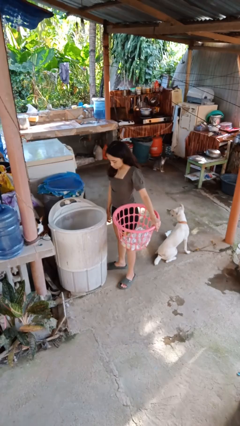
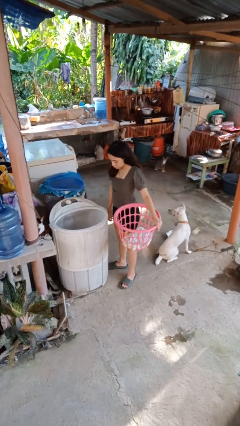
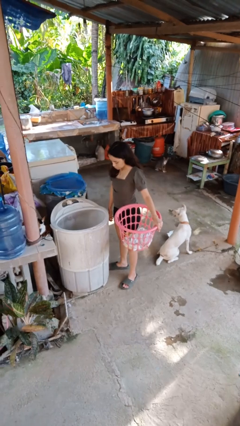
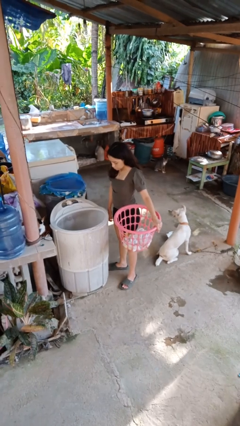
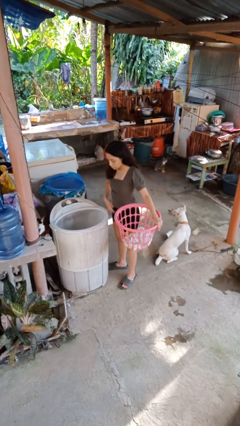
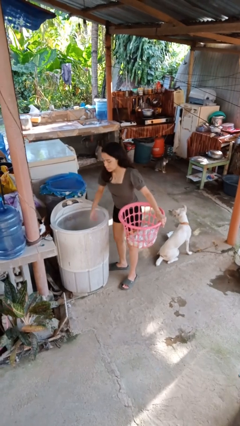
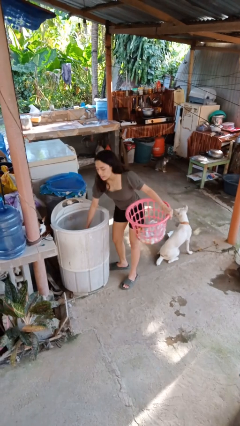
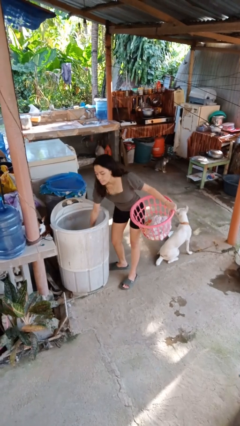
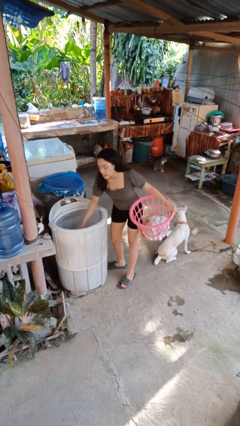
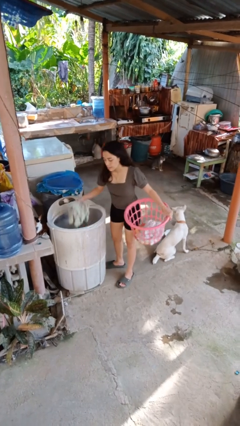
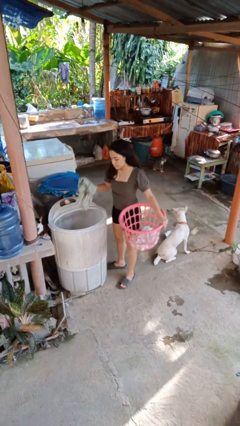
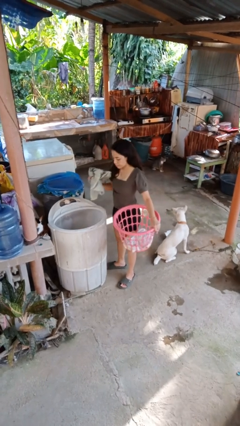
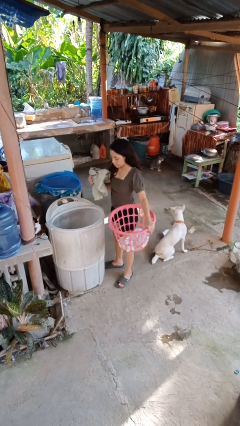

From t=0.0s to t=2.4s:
person unloads dryer

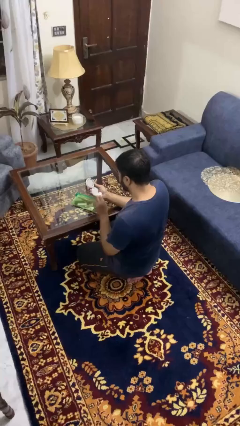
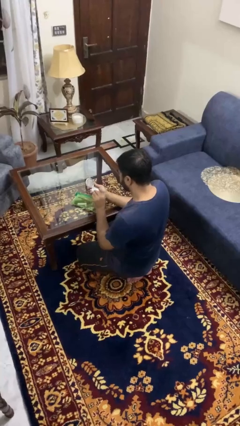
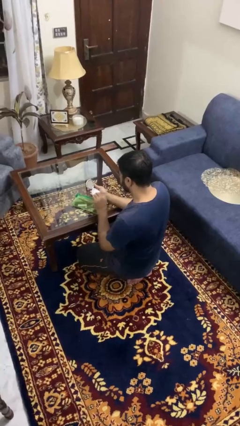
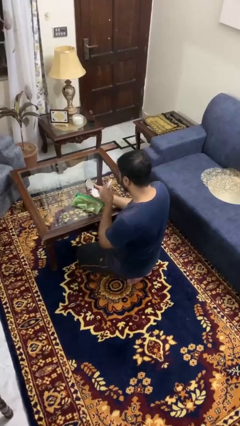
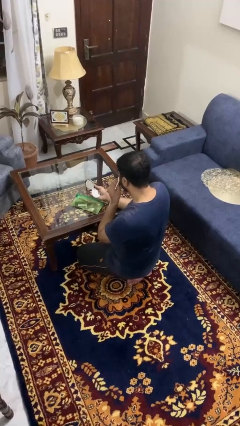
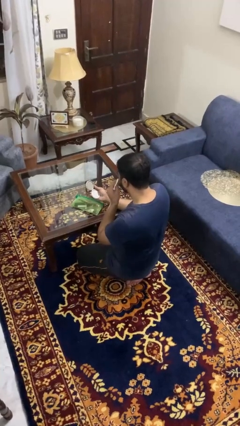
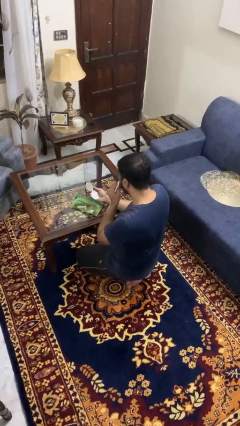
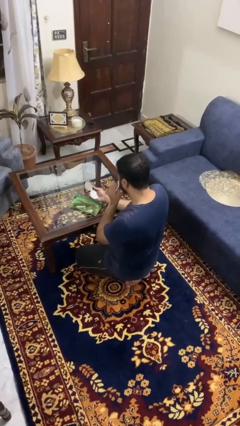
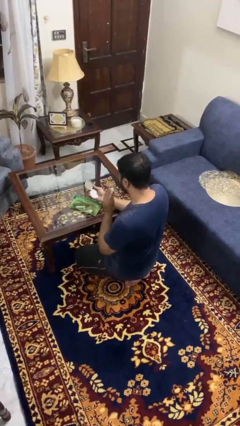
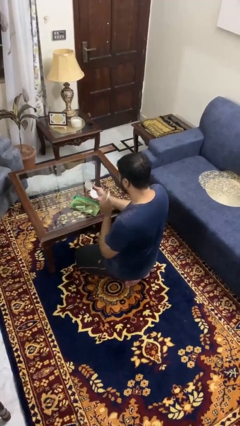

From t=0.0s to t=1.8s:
person applies foundation makeup

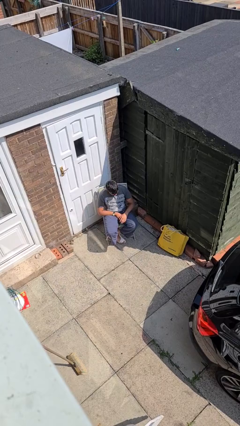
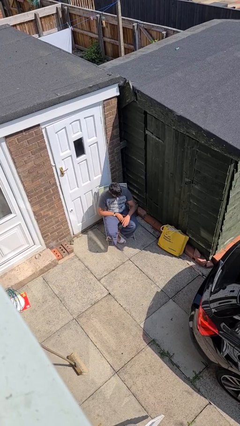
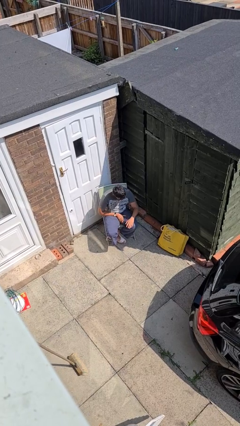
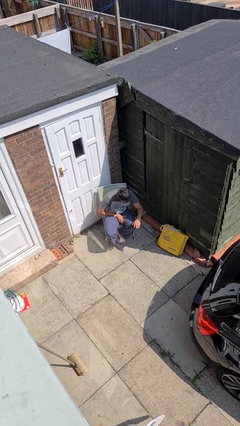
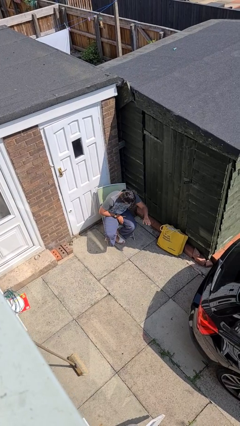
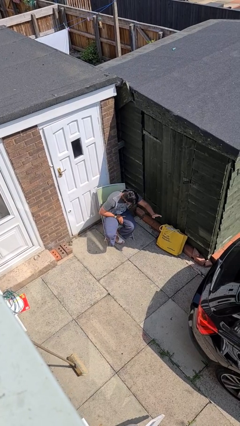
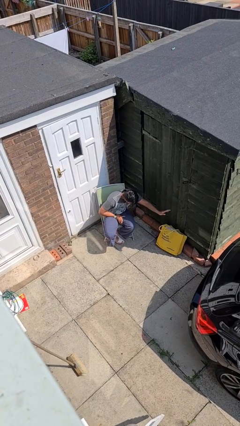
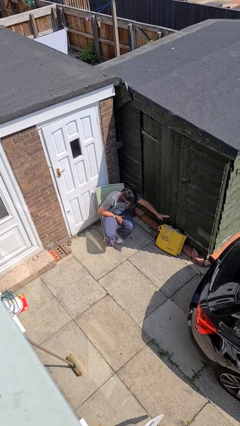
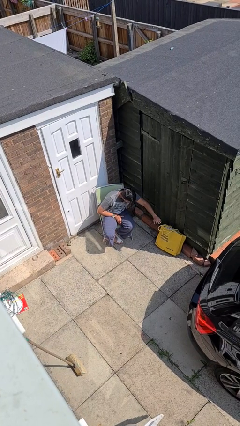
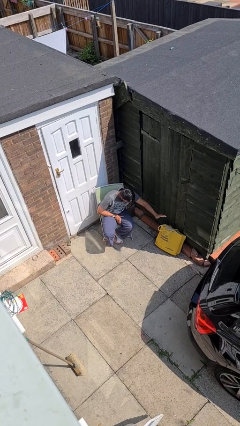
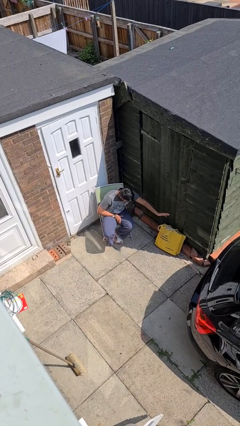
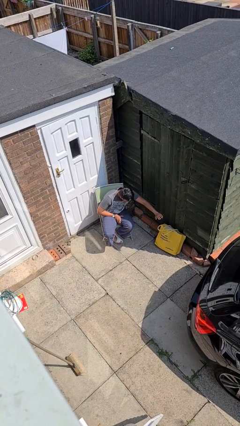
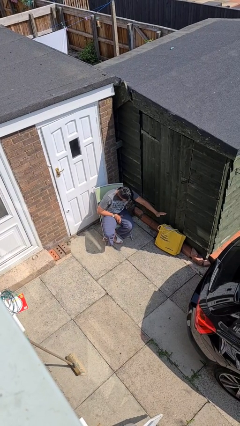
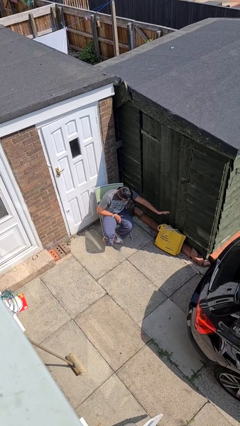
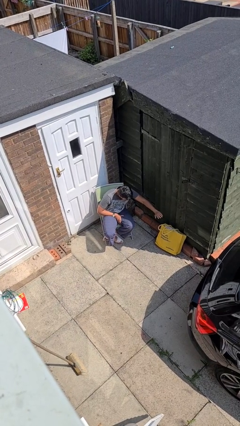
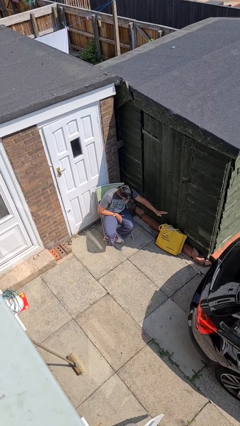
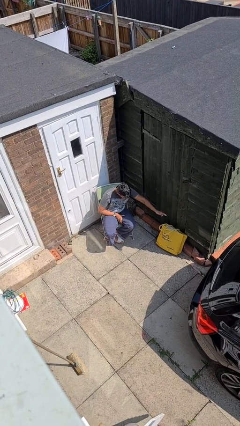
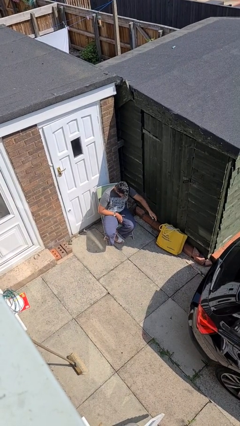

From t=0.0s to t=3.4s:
person waves hand over object

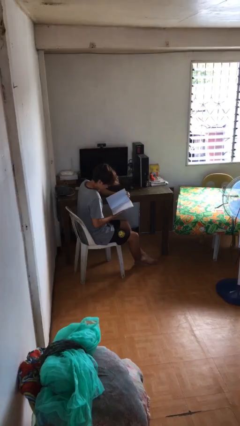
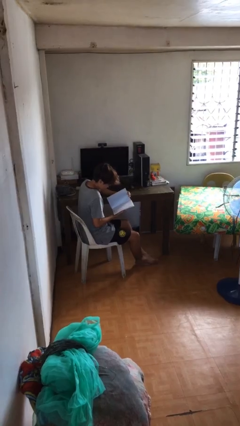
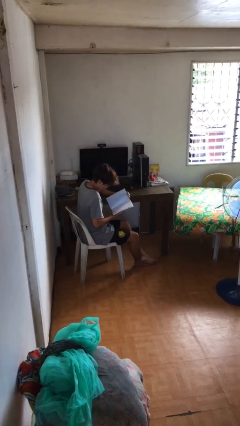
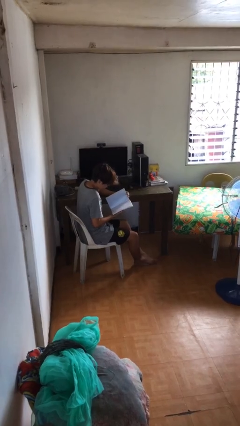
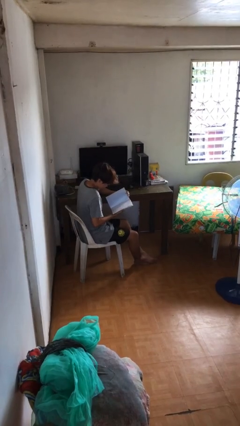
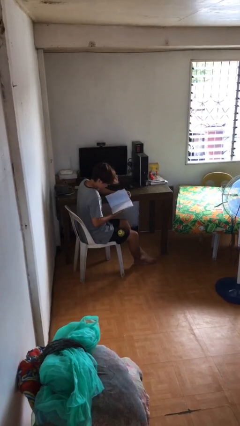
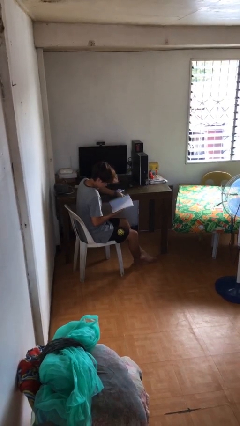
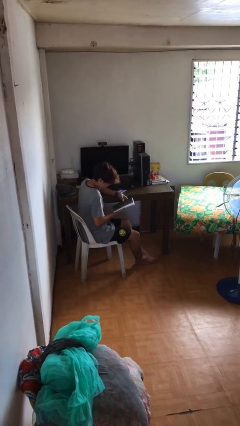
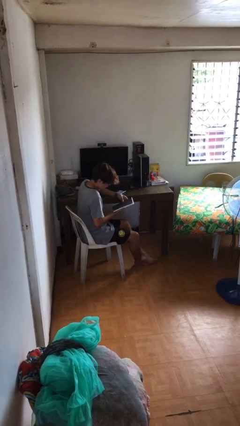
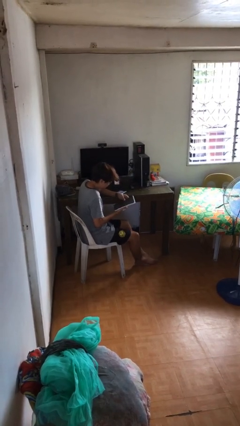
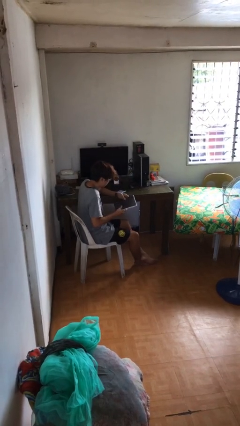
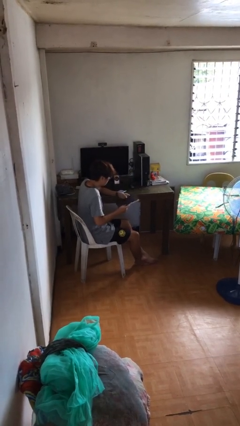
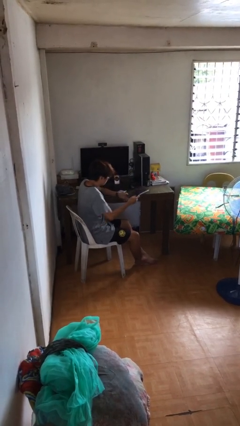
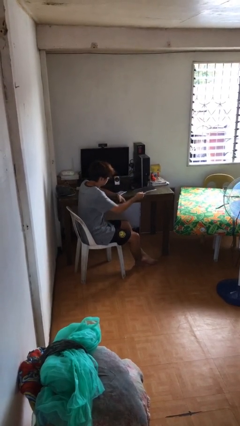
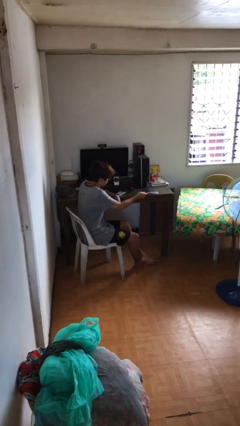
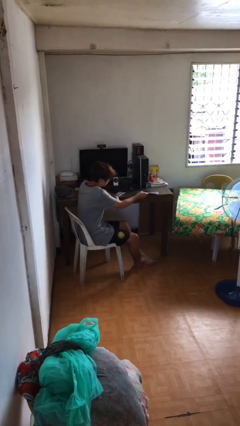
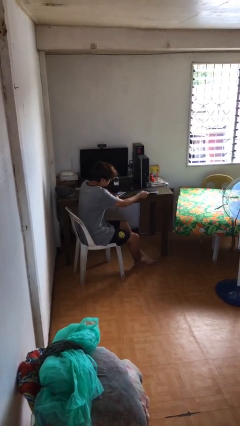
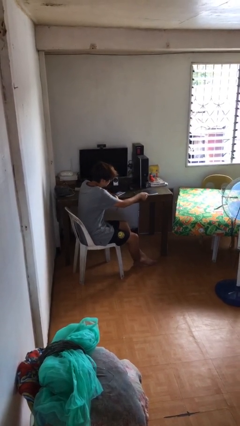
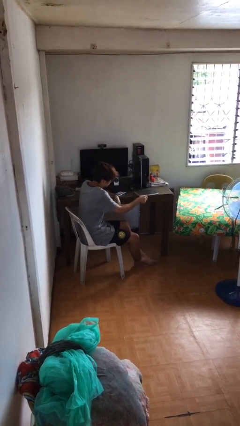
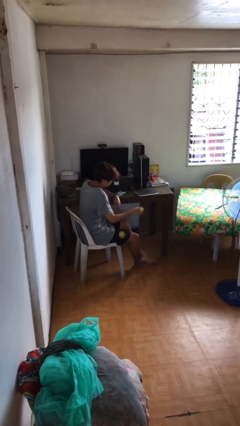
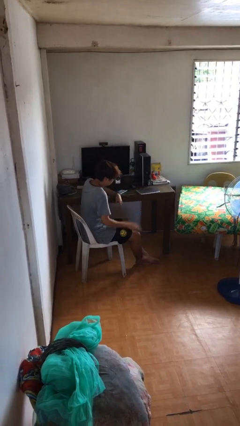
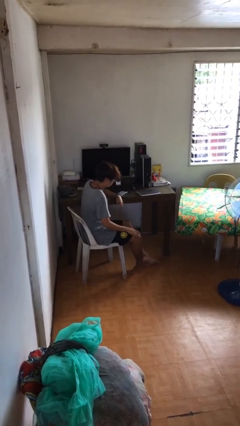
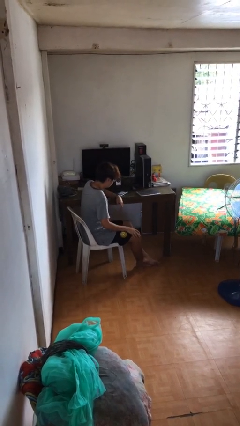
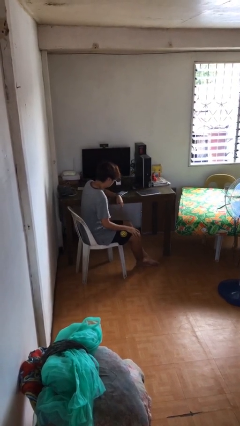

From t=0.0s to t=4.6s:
person puts down object on table

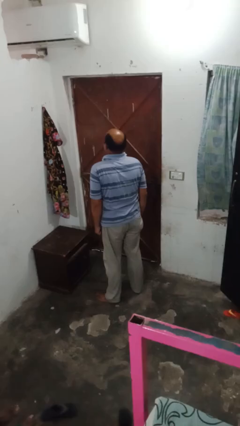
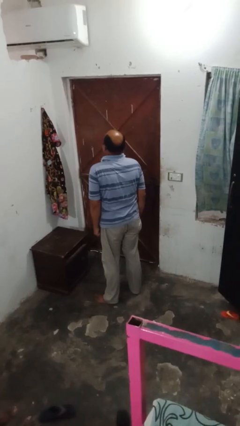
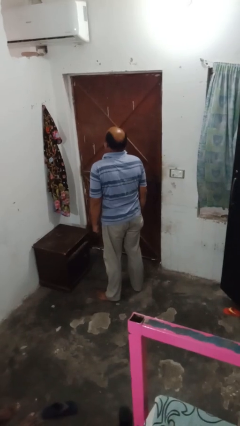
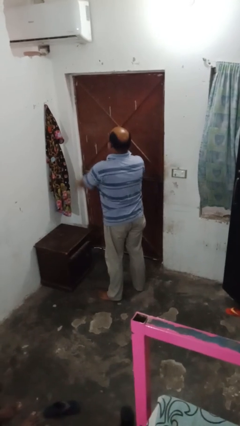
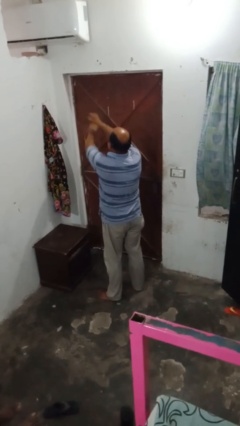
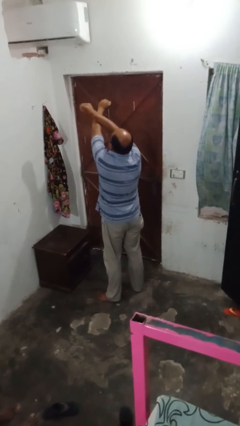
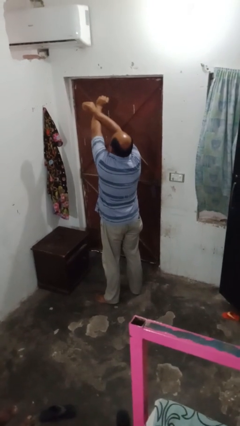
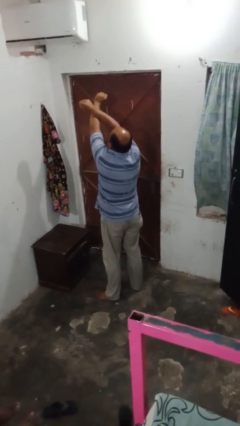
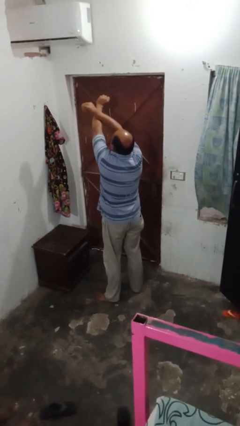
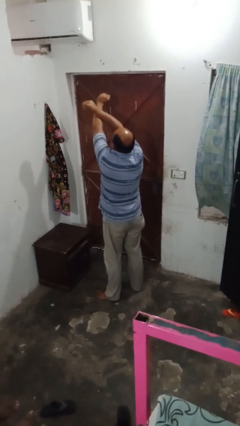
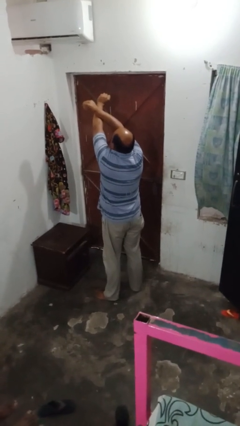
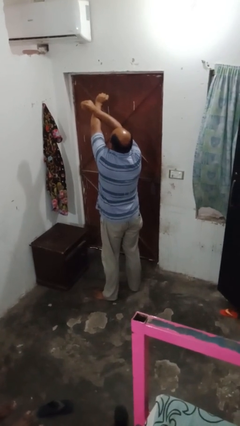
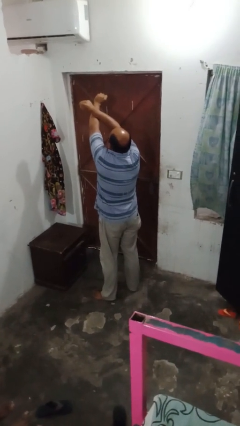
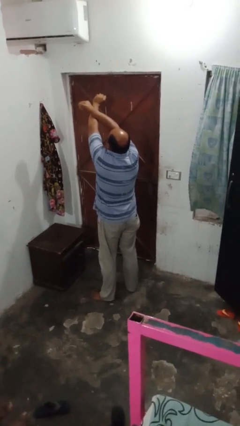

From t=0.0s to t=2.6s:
person gestures arms x

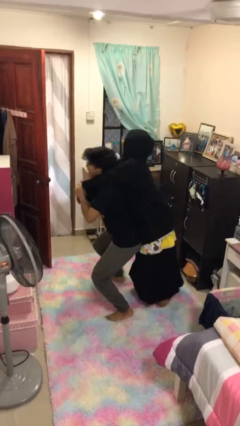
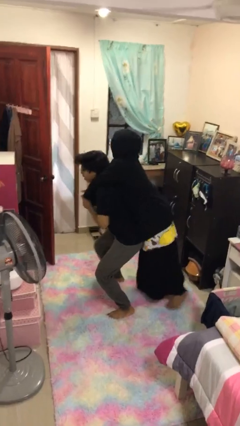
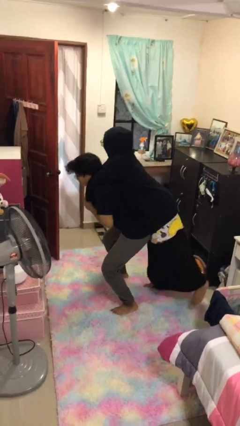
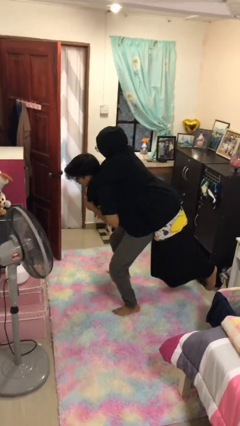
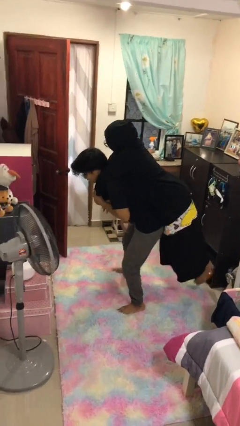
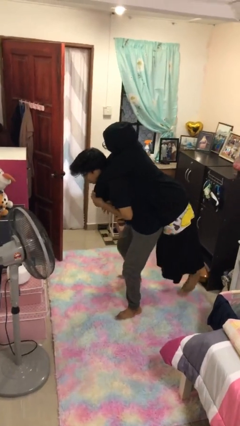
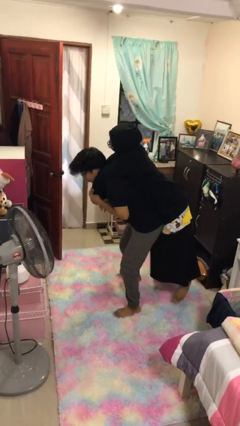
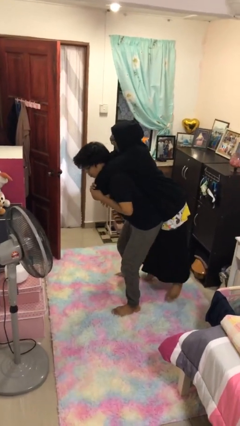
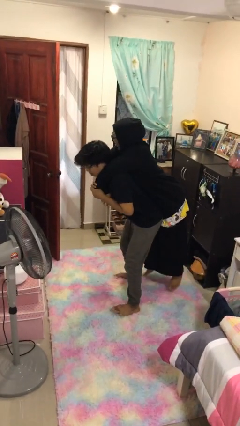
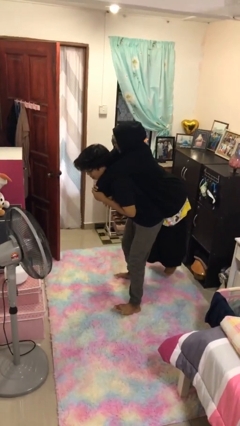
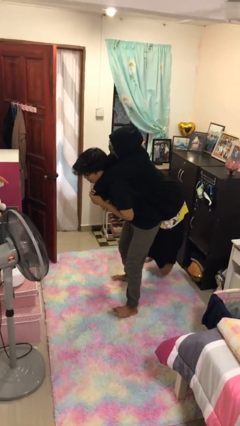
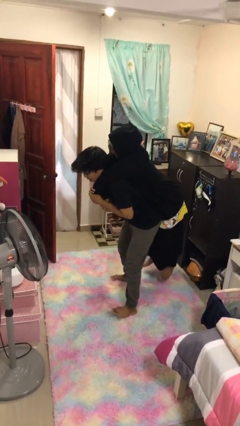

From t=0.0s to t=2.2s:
person picks up person

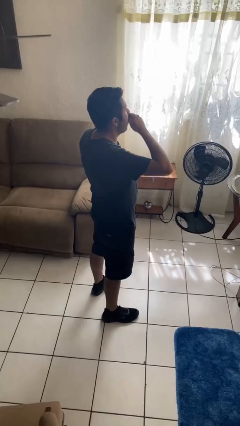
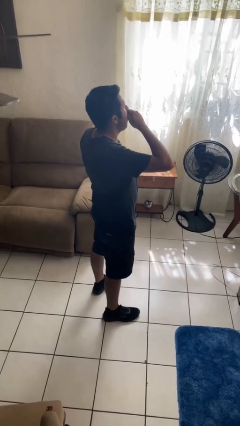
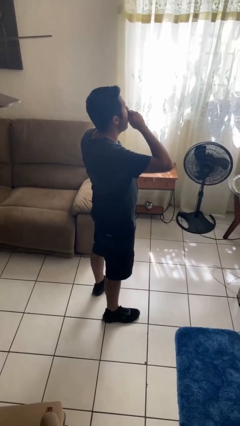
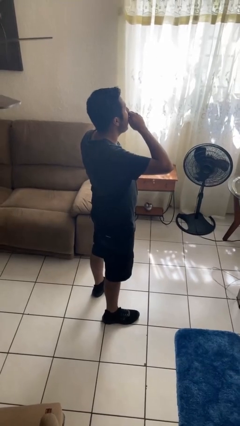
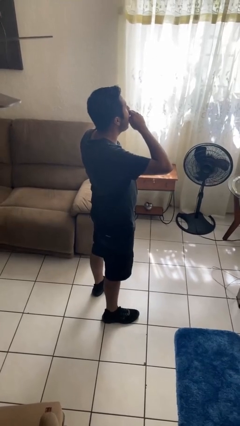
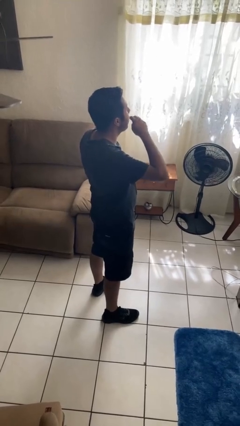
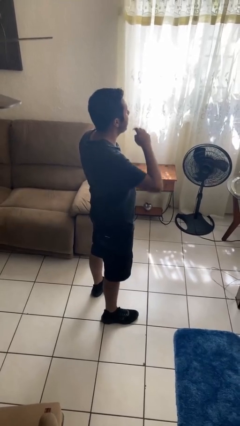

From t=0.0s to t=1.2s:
person yawns
